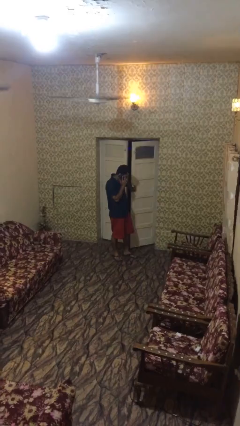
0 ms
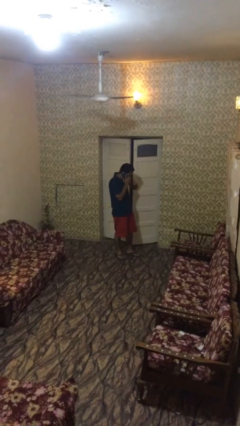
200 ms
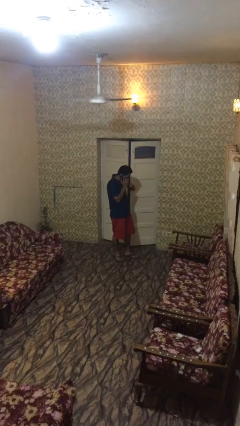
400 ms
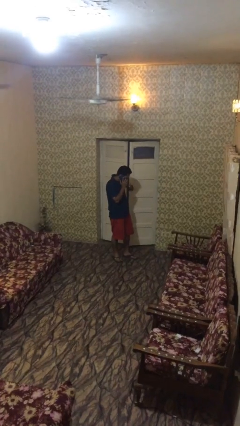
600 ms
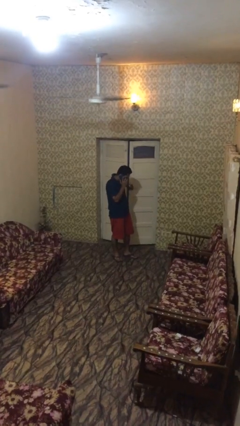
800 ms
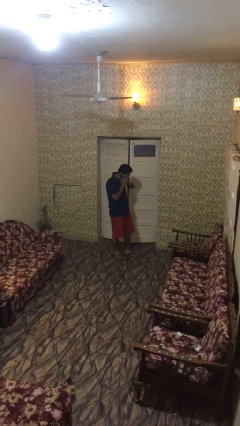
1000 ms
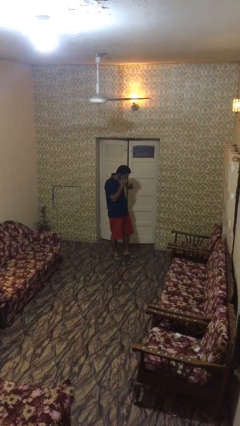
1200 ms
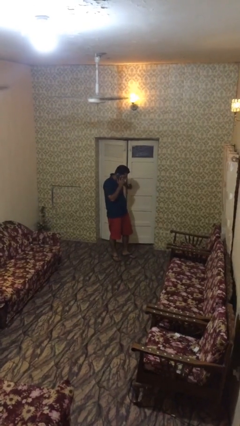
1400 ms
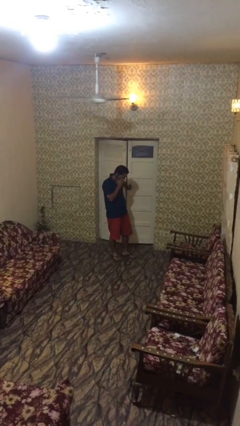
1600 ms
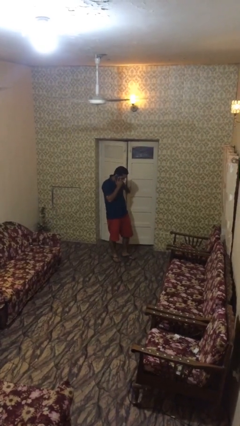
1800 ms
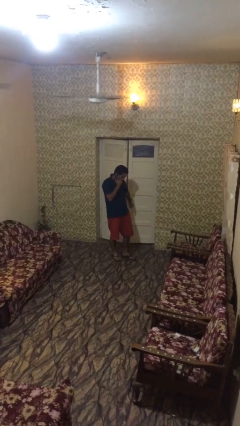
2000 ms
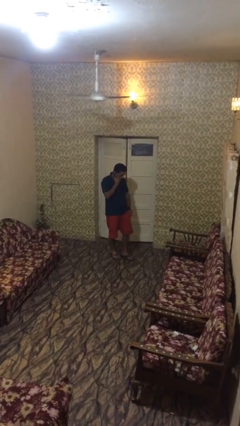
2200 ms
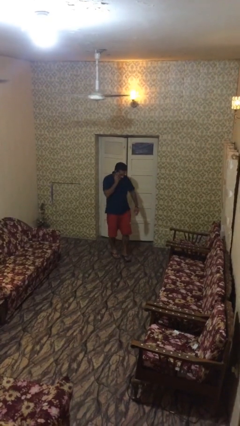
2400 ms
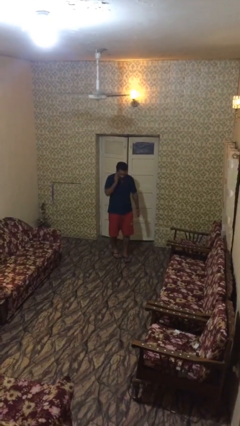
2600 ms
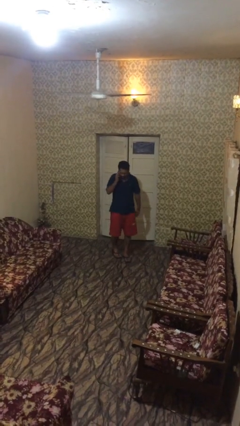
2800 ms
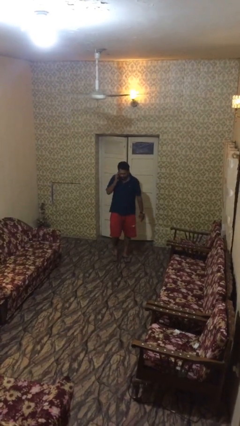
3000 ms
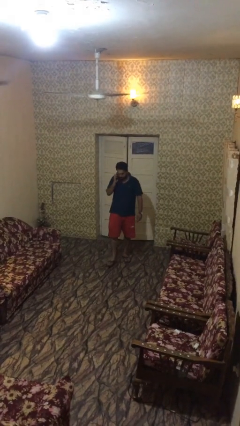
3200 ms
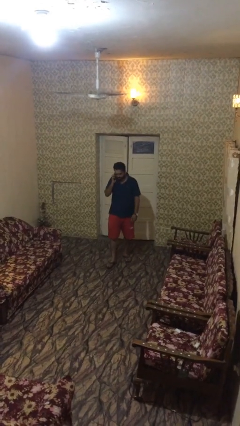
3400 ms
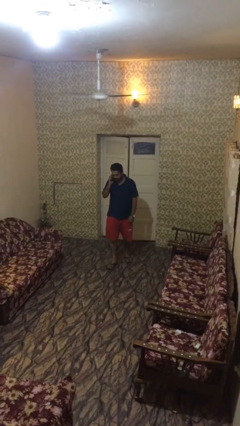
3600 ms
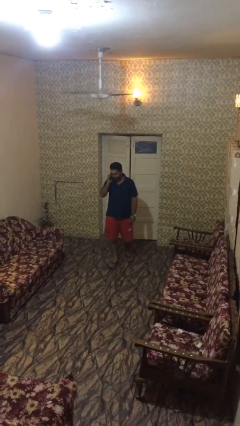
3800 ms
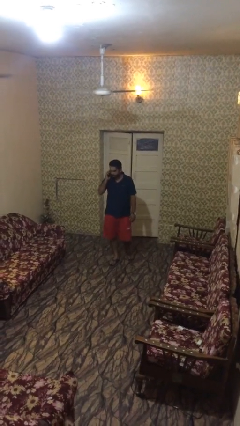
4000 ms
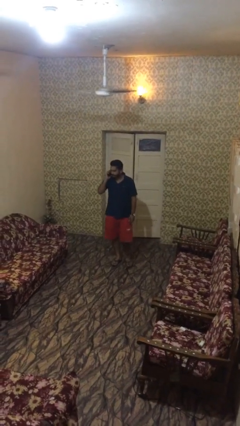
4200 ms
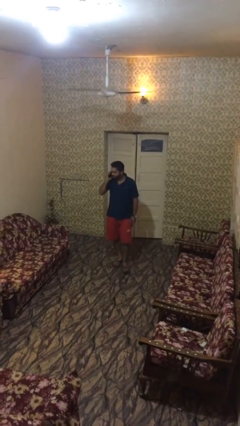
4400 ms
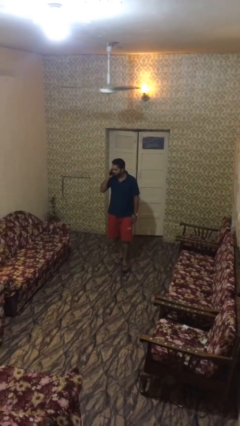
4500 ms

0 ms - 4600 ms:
person closes facility door

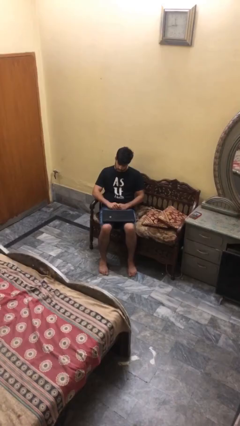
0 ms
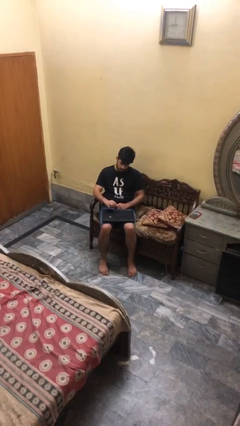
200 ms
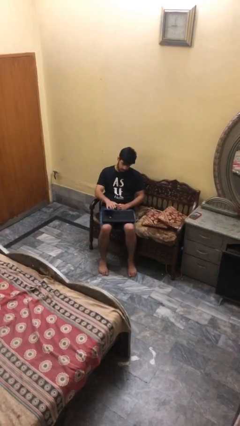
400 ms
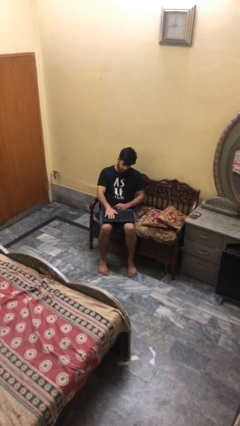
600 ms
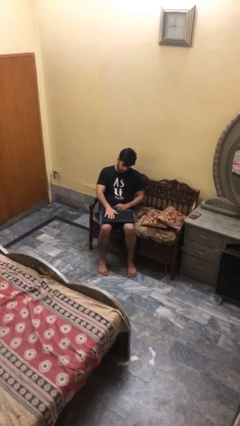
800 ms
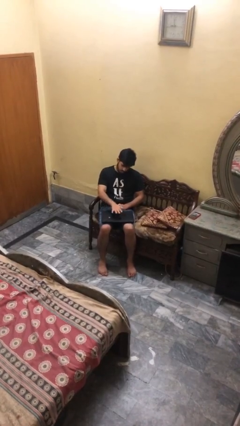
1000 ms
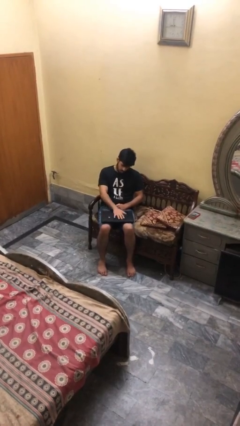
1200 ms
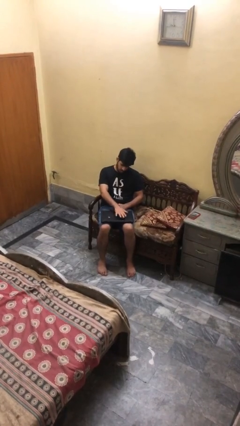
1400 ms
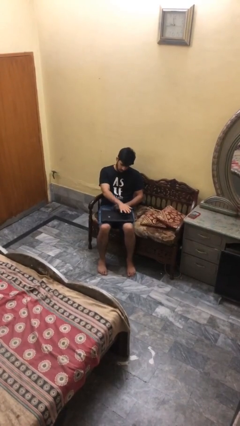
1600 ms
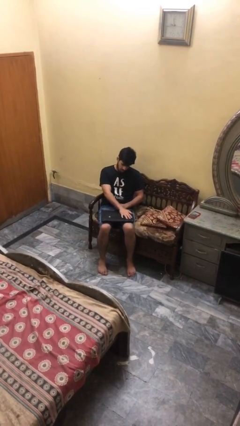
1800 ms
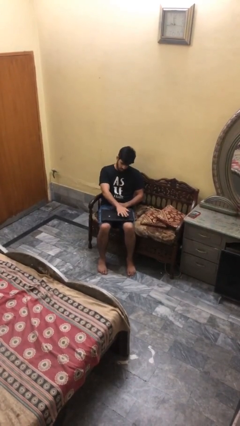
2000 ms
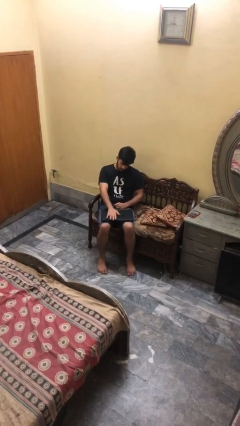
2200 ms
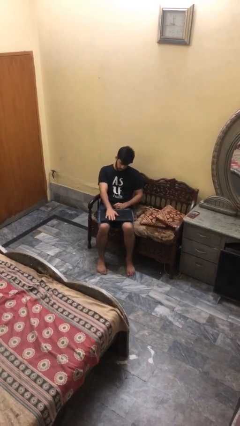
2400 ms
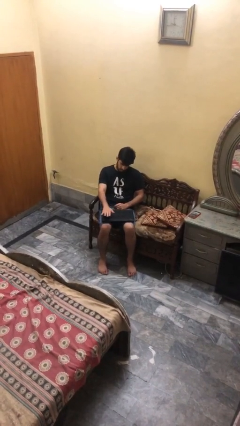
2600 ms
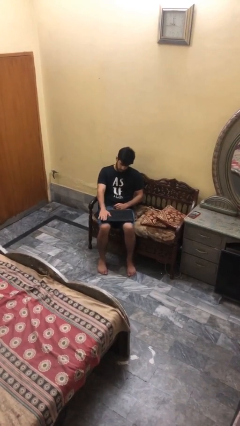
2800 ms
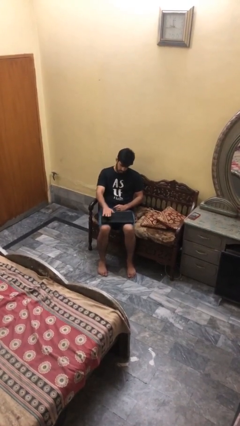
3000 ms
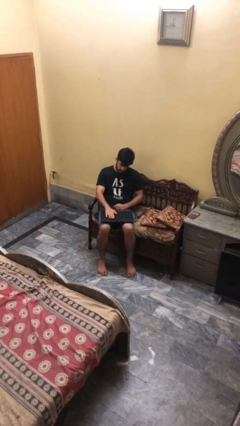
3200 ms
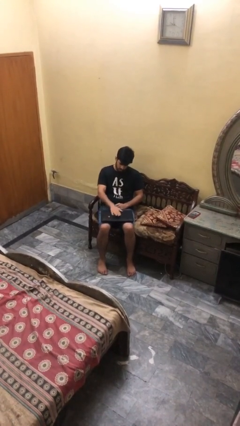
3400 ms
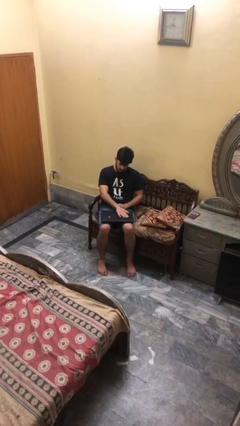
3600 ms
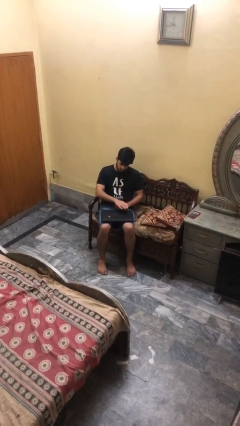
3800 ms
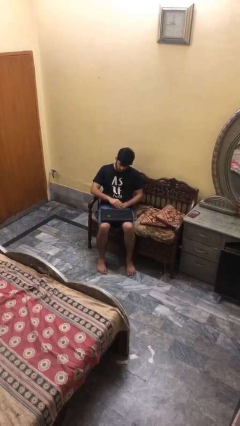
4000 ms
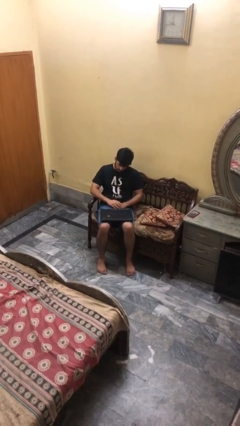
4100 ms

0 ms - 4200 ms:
person taps object with finger

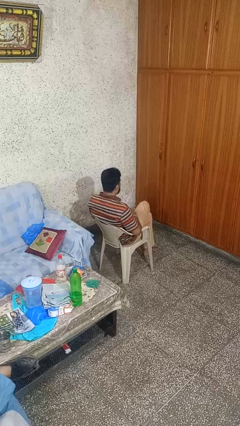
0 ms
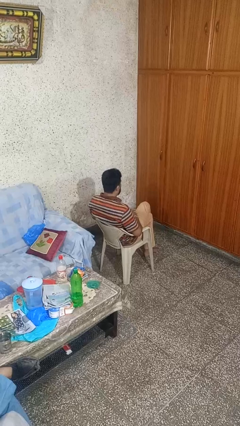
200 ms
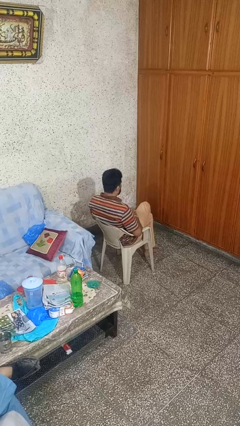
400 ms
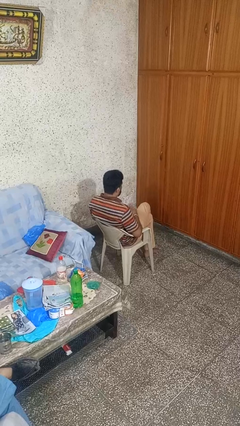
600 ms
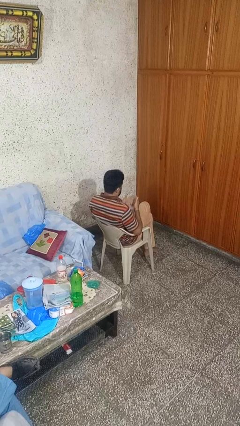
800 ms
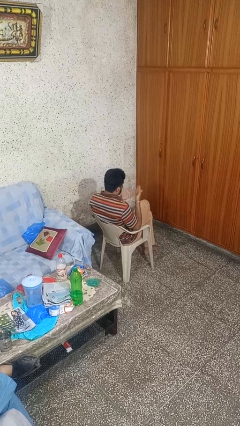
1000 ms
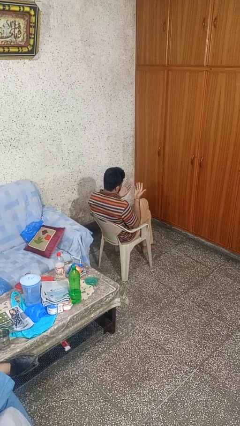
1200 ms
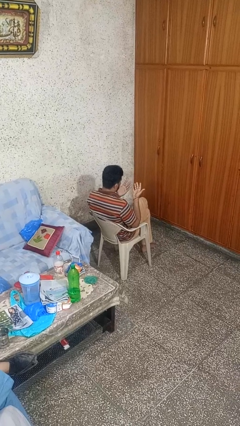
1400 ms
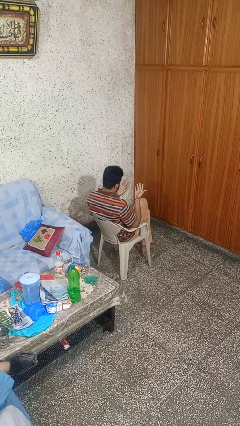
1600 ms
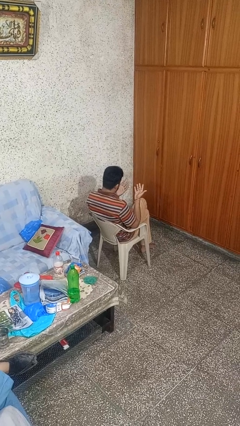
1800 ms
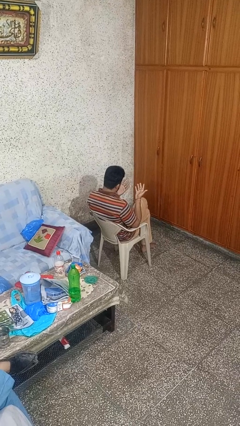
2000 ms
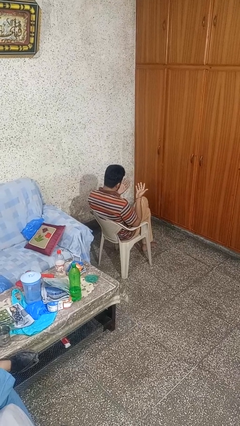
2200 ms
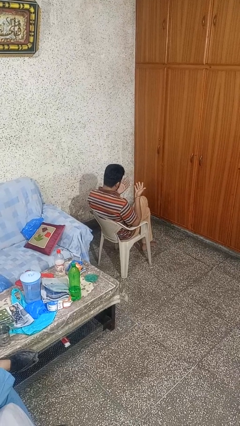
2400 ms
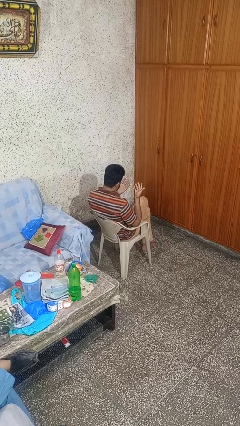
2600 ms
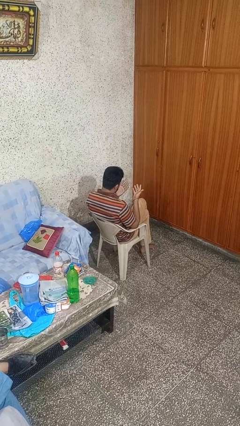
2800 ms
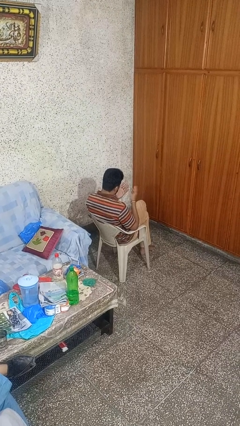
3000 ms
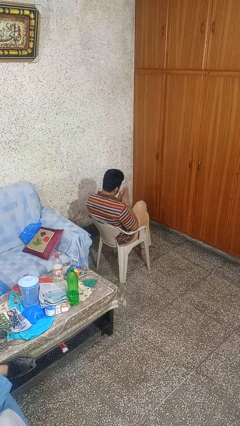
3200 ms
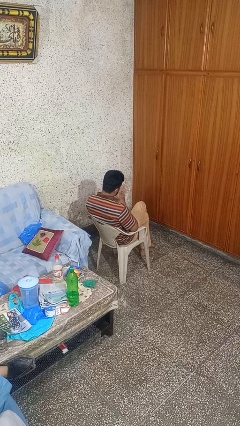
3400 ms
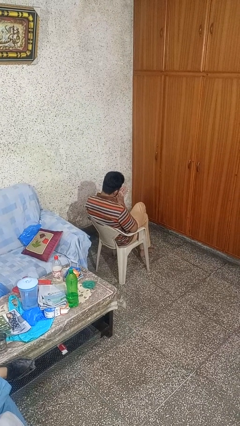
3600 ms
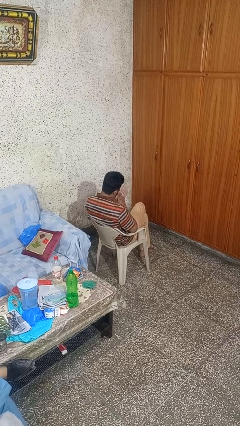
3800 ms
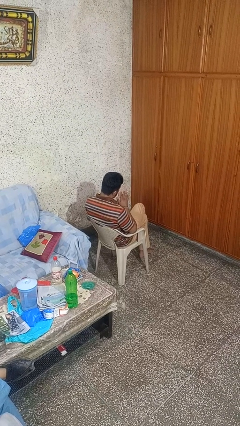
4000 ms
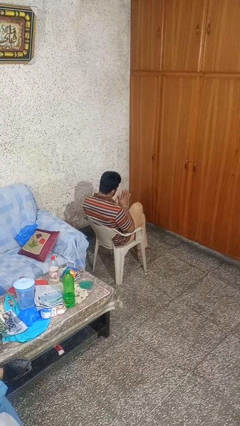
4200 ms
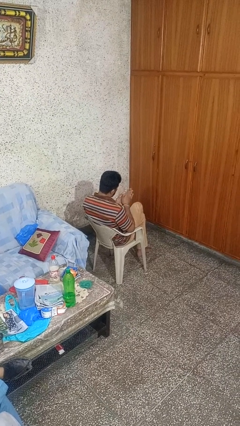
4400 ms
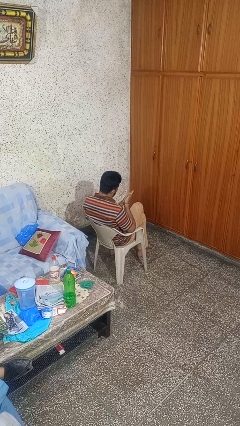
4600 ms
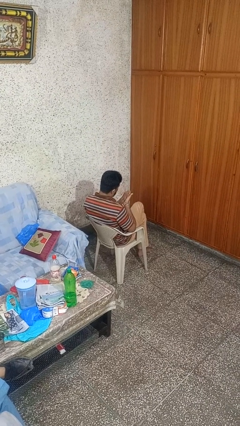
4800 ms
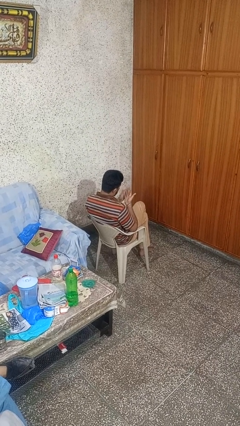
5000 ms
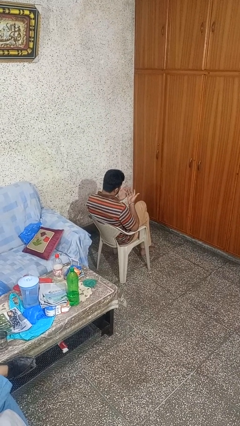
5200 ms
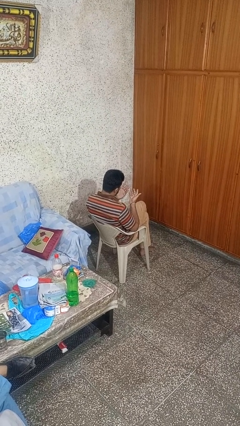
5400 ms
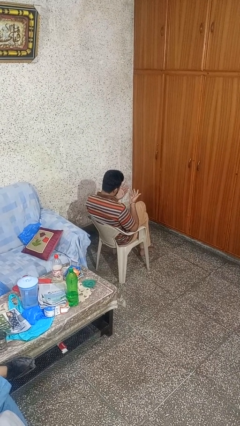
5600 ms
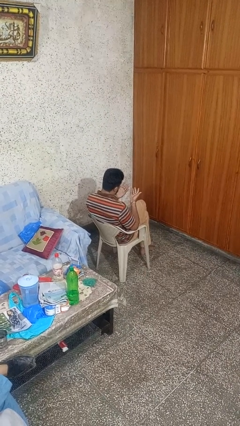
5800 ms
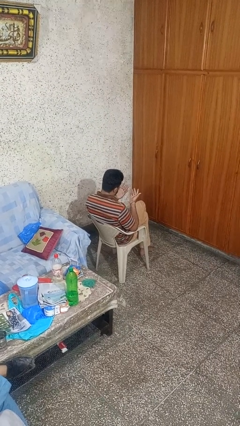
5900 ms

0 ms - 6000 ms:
person looks at hands in lap

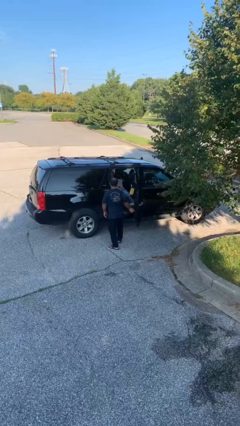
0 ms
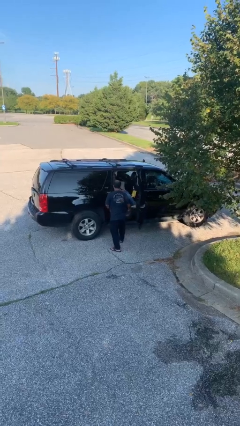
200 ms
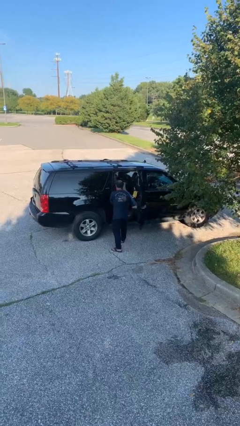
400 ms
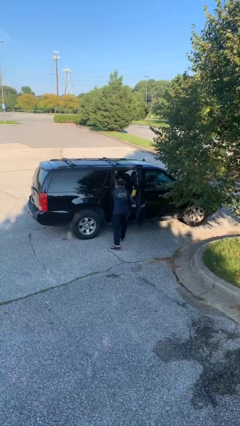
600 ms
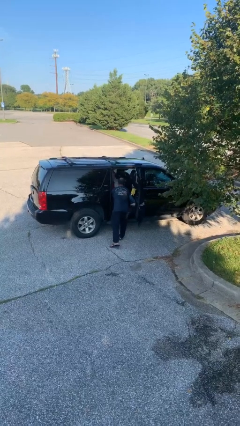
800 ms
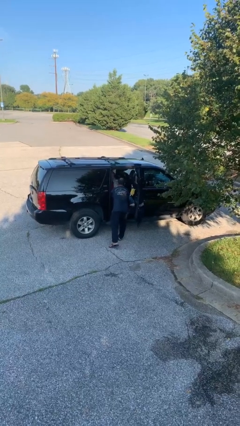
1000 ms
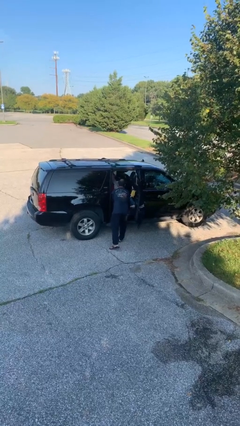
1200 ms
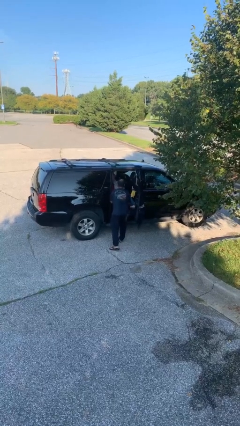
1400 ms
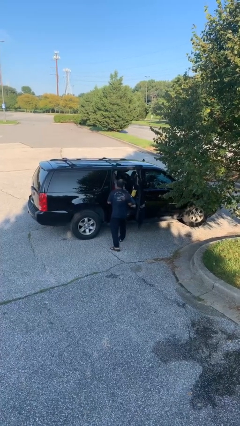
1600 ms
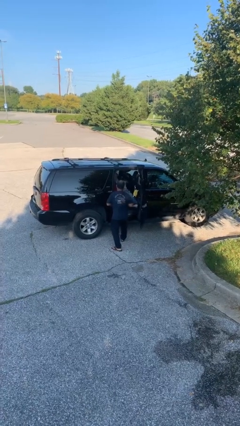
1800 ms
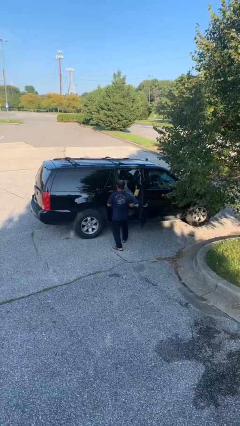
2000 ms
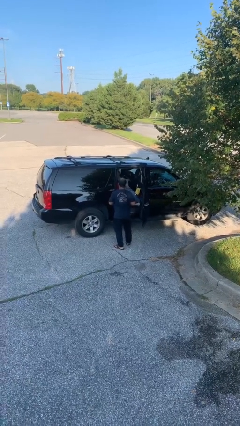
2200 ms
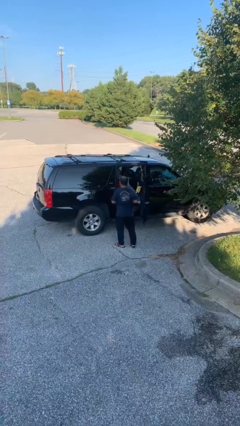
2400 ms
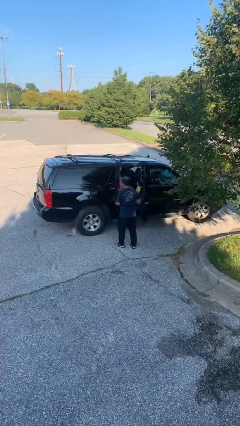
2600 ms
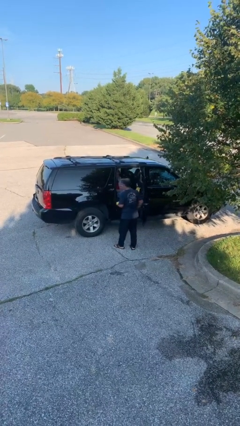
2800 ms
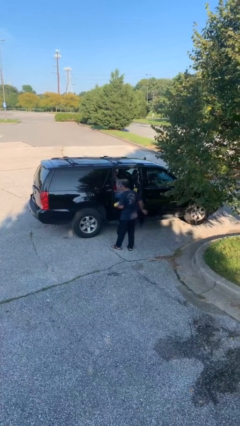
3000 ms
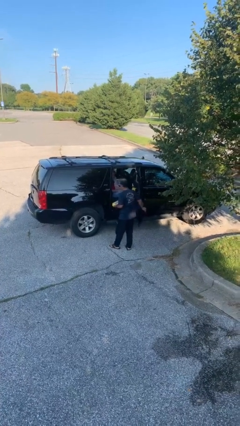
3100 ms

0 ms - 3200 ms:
person unloads car
